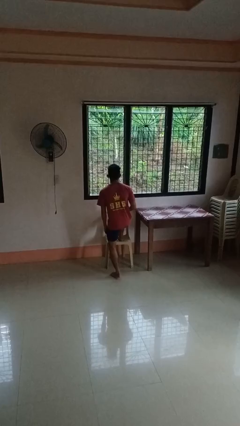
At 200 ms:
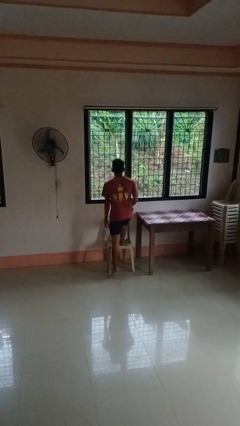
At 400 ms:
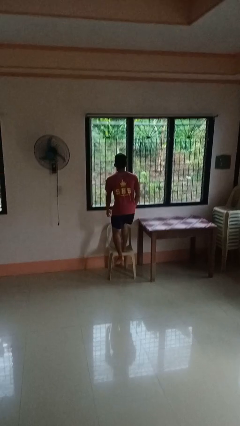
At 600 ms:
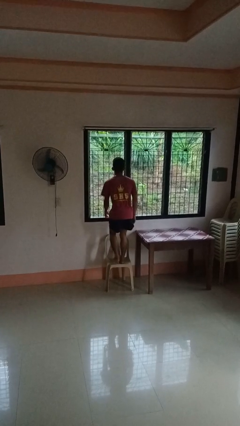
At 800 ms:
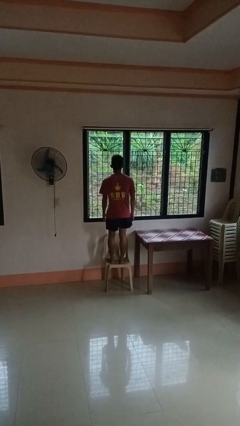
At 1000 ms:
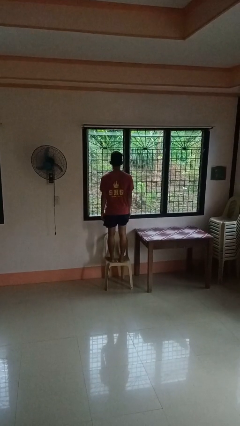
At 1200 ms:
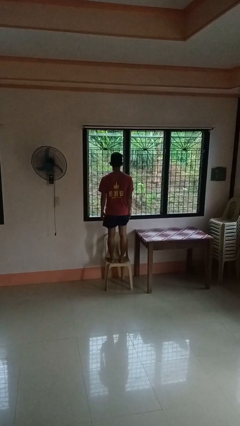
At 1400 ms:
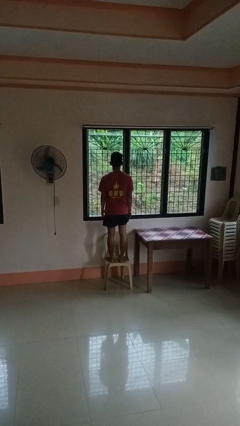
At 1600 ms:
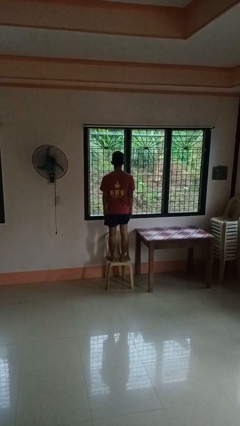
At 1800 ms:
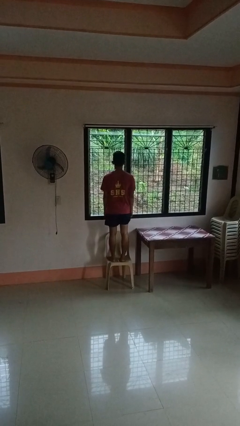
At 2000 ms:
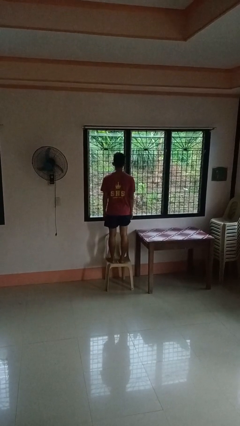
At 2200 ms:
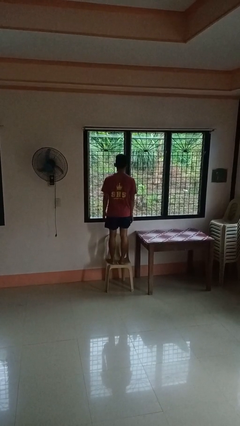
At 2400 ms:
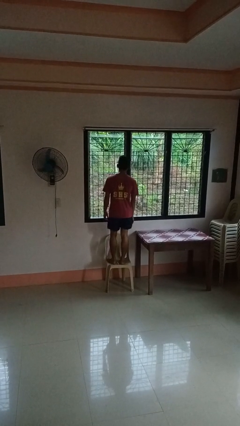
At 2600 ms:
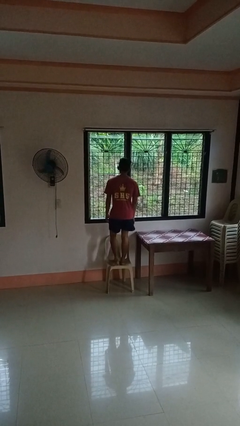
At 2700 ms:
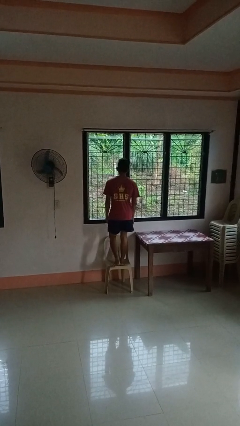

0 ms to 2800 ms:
person climbs on chair

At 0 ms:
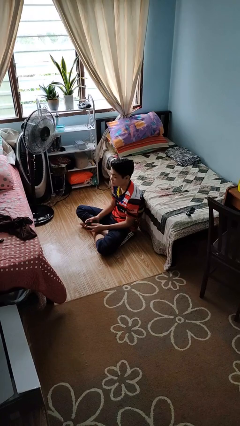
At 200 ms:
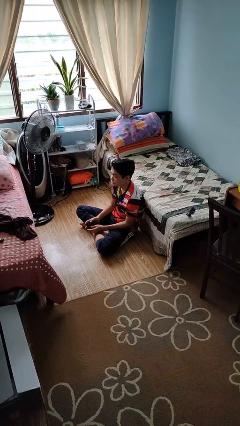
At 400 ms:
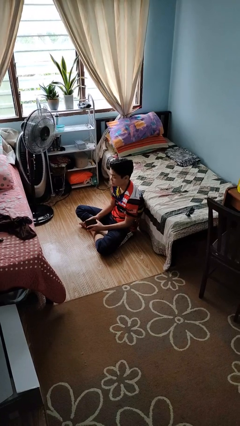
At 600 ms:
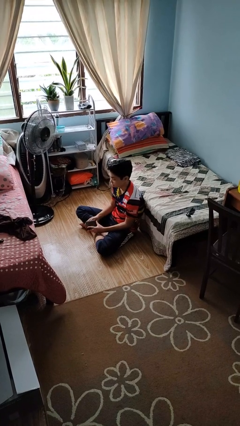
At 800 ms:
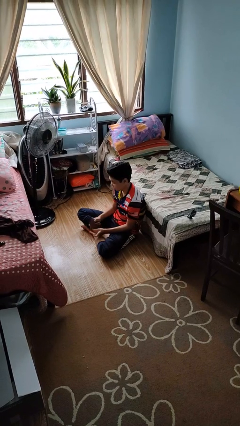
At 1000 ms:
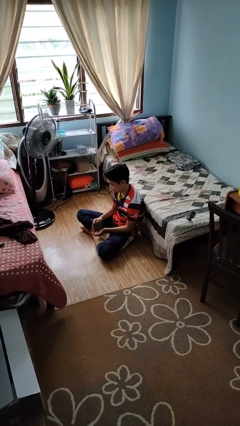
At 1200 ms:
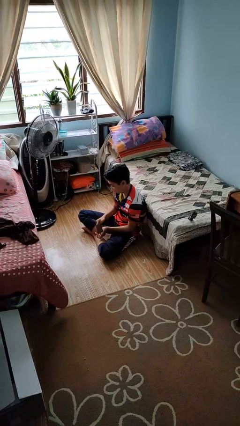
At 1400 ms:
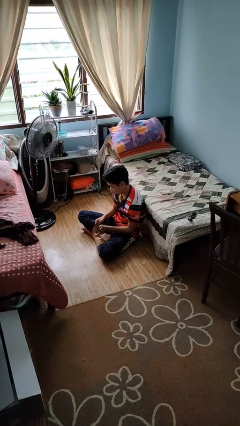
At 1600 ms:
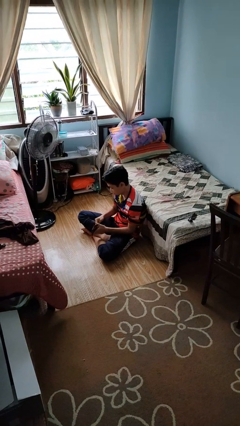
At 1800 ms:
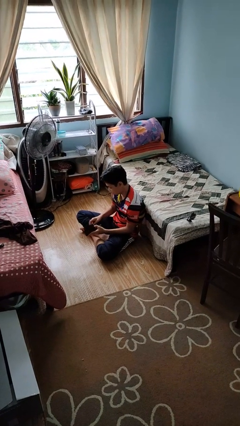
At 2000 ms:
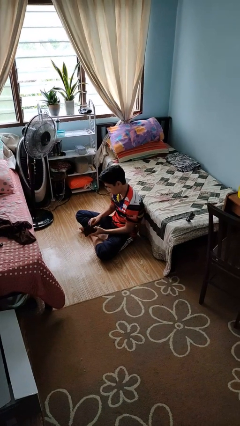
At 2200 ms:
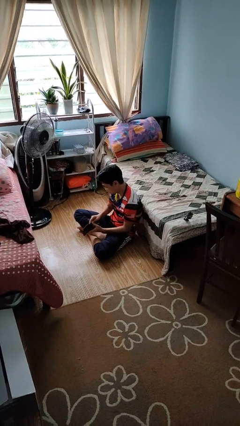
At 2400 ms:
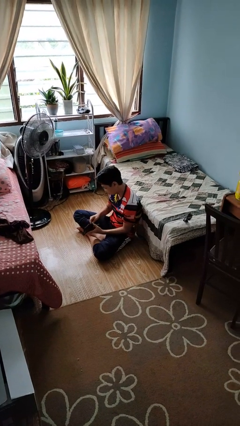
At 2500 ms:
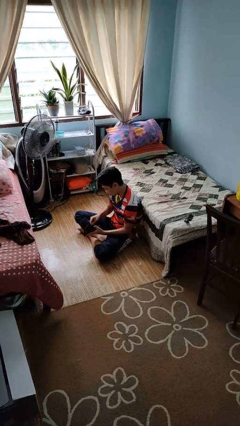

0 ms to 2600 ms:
person searches in purse

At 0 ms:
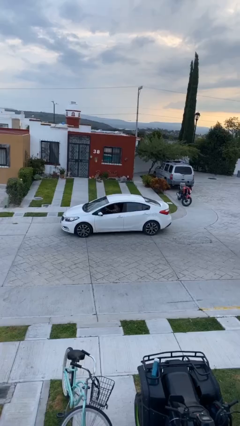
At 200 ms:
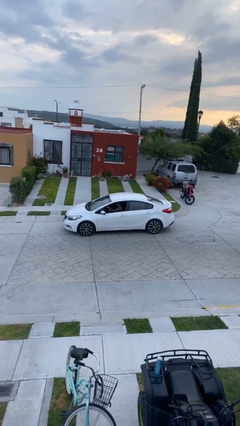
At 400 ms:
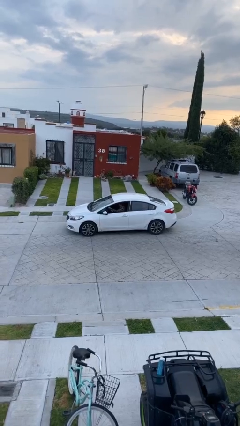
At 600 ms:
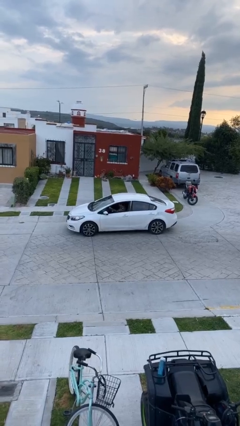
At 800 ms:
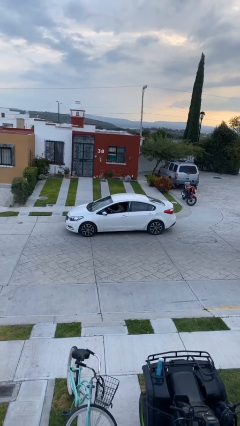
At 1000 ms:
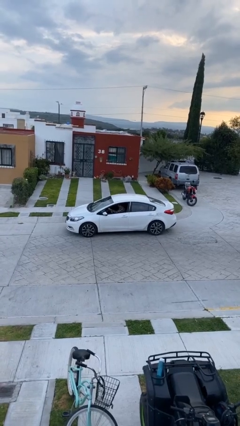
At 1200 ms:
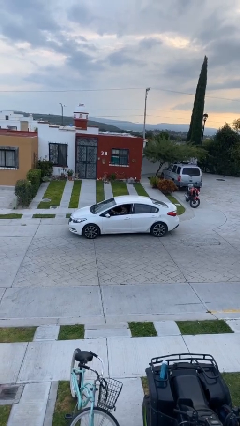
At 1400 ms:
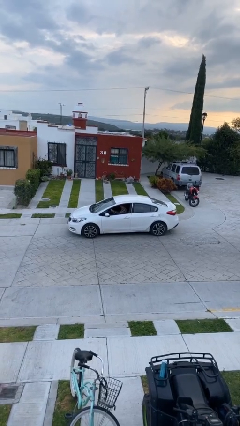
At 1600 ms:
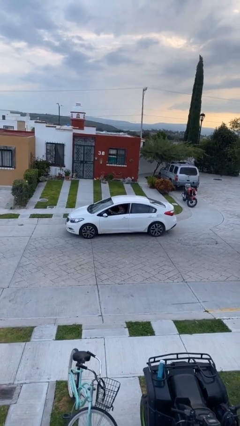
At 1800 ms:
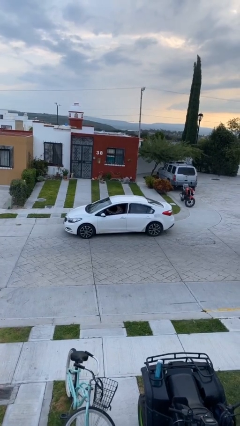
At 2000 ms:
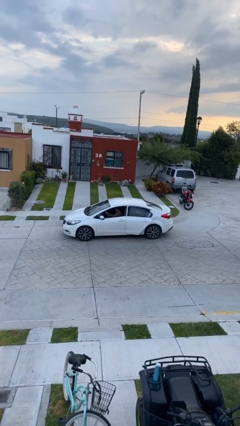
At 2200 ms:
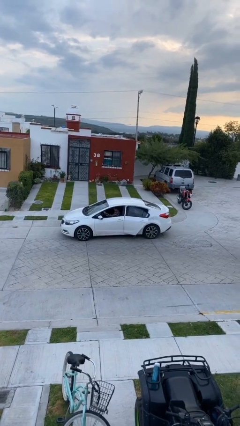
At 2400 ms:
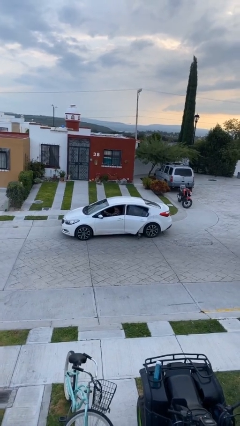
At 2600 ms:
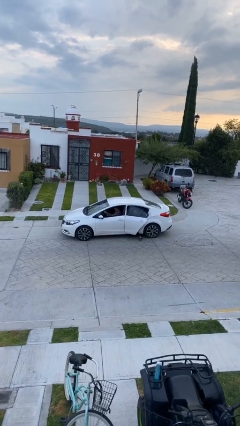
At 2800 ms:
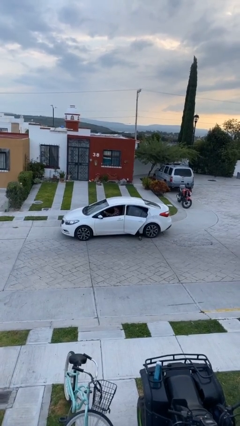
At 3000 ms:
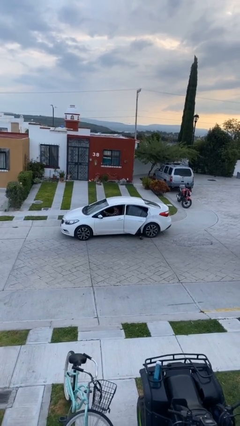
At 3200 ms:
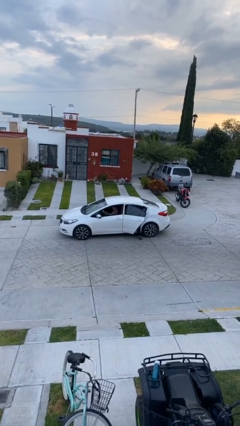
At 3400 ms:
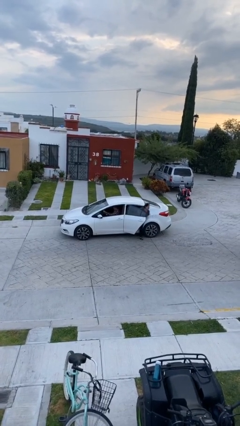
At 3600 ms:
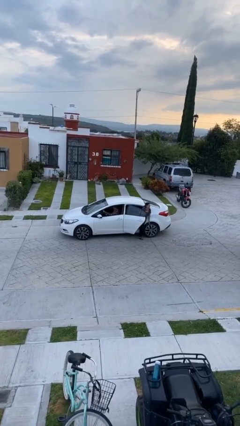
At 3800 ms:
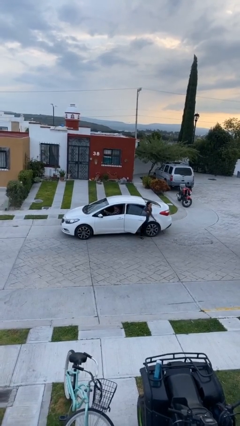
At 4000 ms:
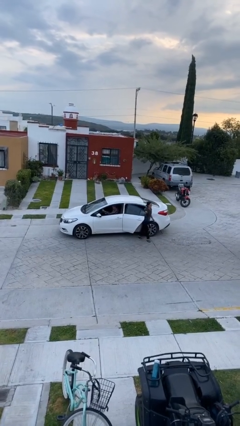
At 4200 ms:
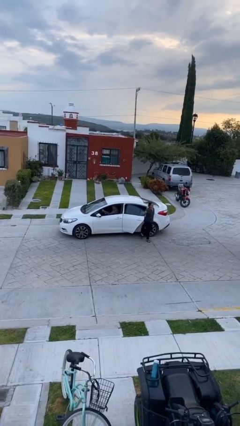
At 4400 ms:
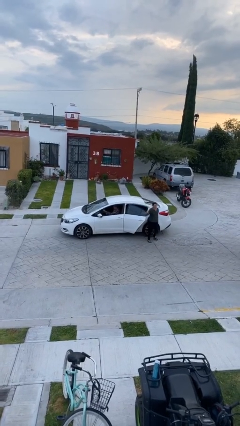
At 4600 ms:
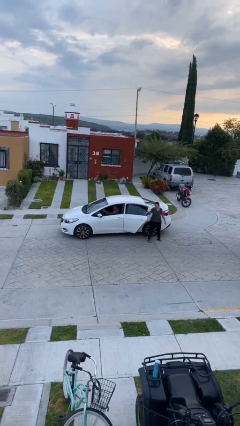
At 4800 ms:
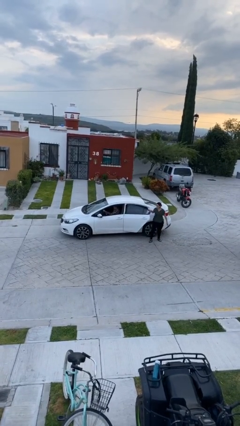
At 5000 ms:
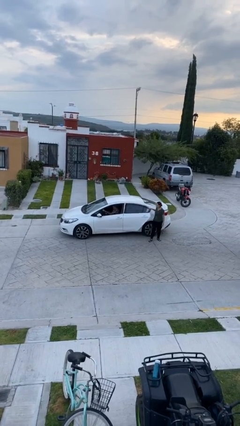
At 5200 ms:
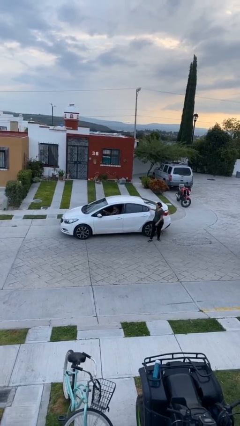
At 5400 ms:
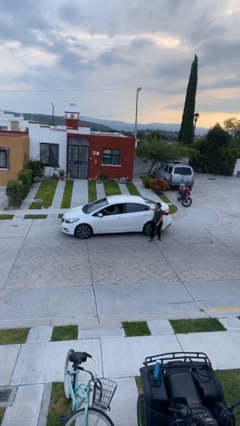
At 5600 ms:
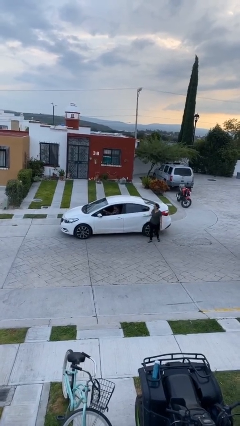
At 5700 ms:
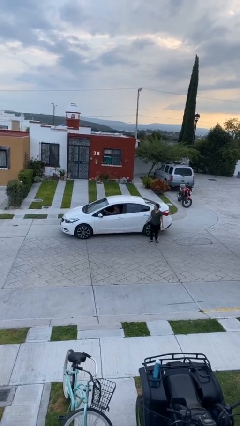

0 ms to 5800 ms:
car drops off person

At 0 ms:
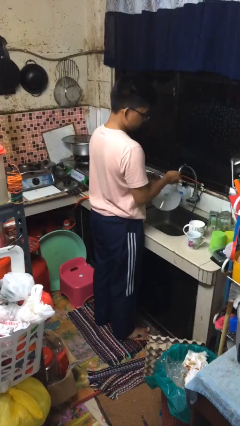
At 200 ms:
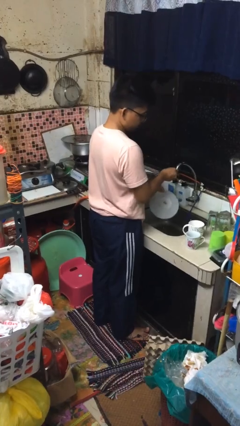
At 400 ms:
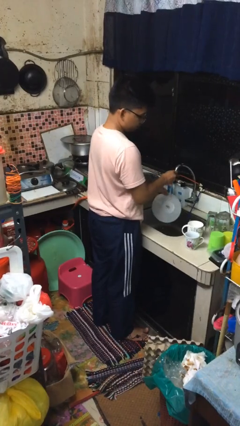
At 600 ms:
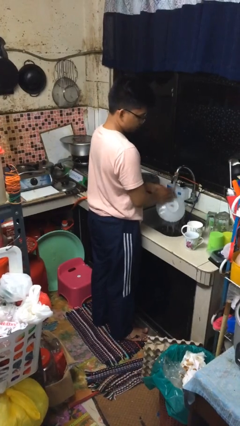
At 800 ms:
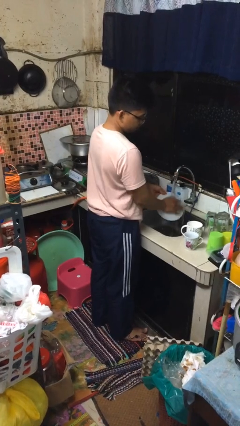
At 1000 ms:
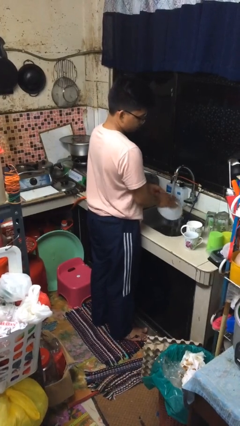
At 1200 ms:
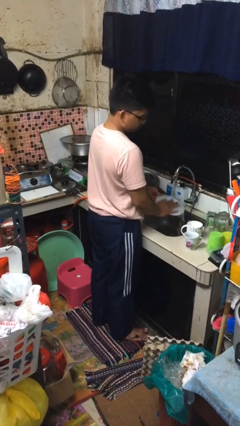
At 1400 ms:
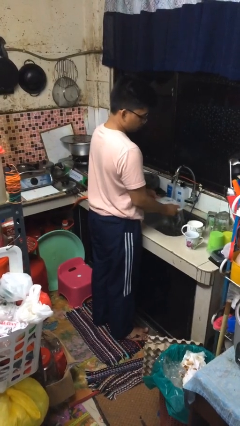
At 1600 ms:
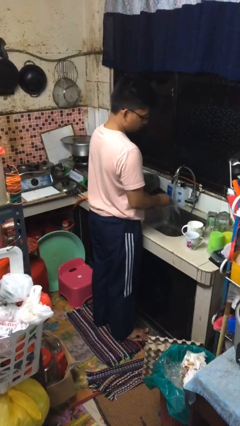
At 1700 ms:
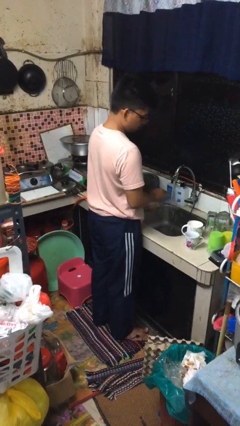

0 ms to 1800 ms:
person washes dish

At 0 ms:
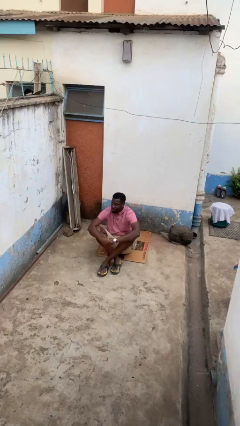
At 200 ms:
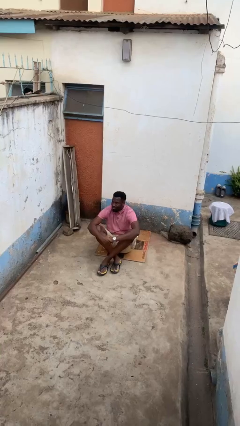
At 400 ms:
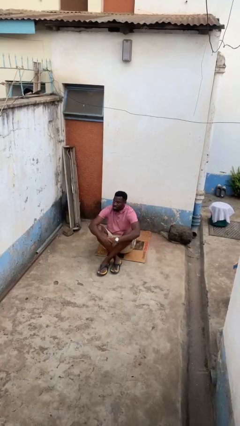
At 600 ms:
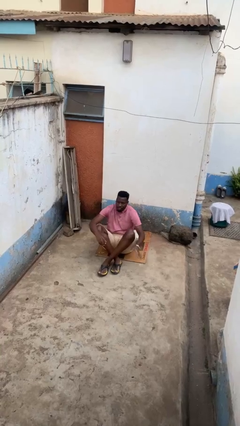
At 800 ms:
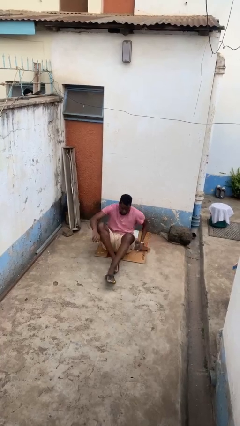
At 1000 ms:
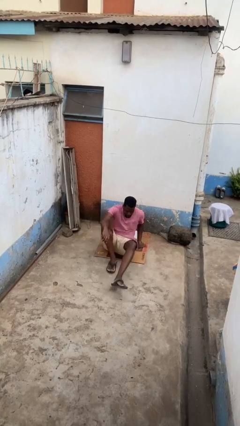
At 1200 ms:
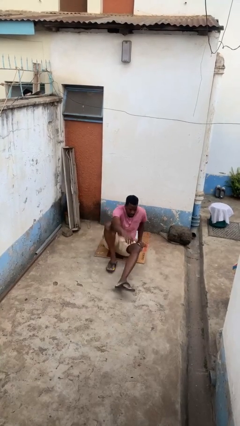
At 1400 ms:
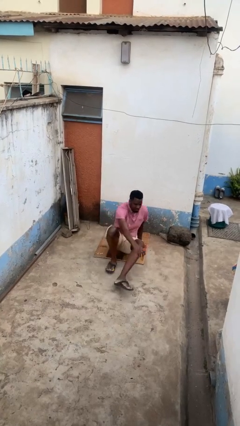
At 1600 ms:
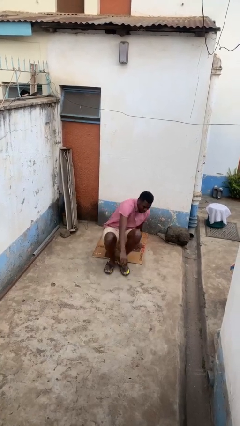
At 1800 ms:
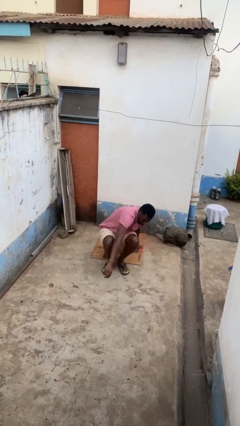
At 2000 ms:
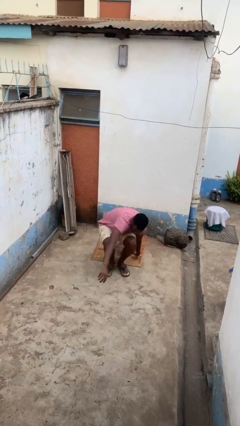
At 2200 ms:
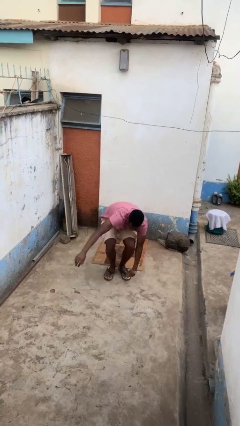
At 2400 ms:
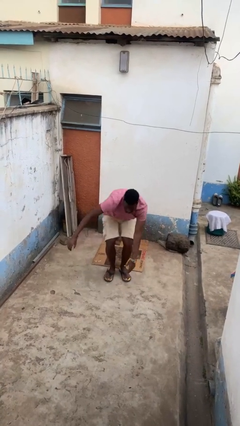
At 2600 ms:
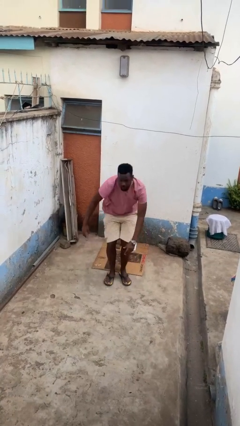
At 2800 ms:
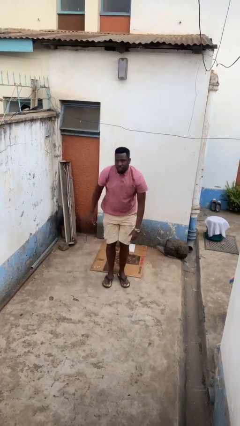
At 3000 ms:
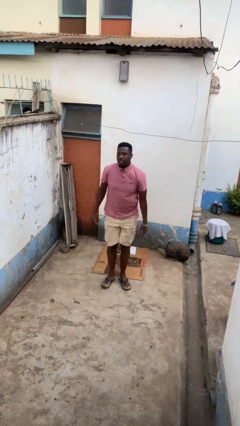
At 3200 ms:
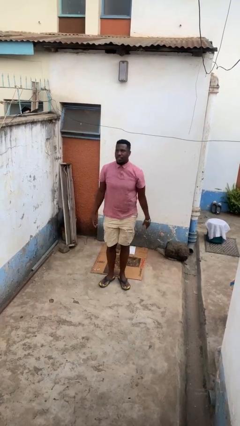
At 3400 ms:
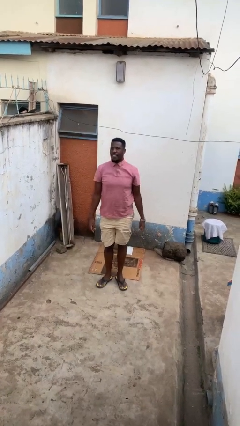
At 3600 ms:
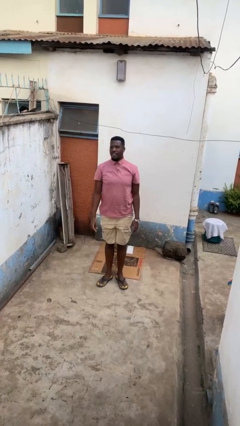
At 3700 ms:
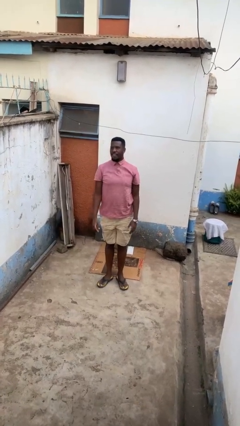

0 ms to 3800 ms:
person stands up from floor

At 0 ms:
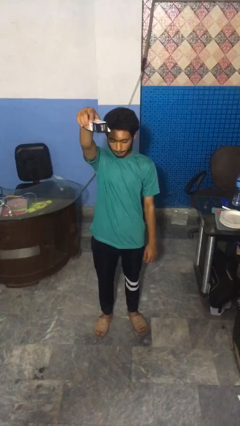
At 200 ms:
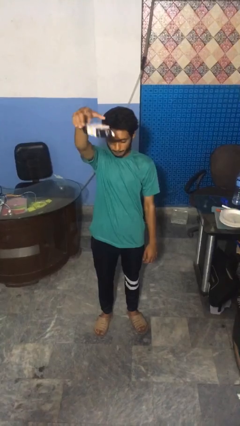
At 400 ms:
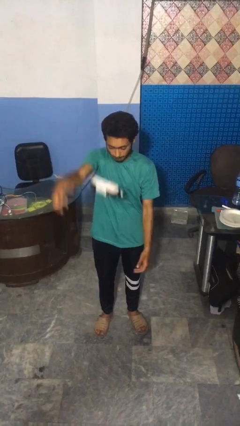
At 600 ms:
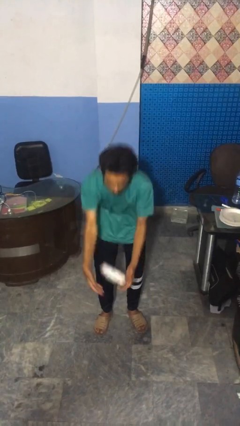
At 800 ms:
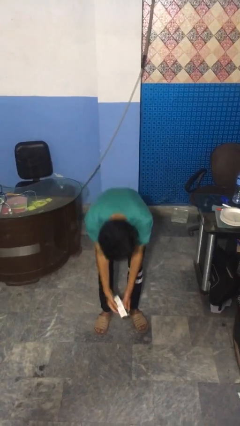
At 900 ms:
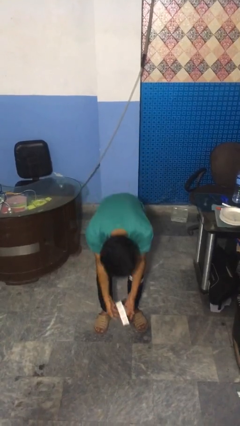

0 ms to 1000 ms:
person drops object
